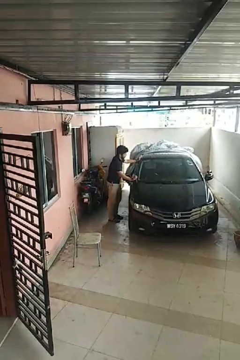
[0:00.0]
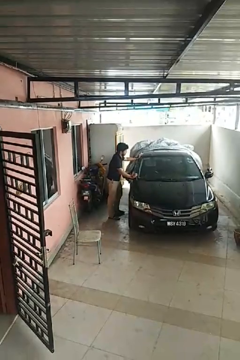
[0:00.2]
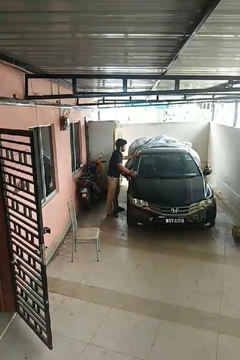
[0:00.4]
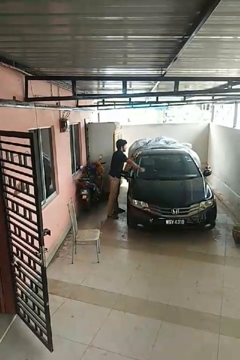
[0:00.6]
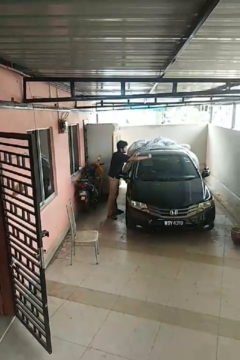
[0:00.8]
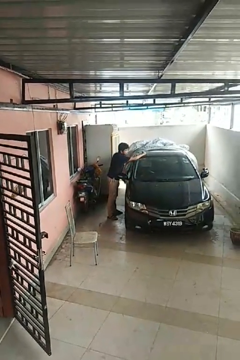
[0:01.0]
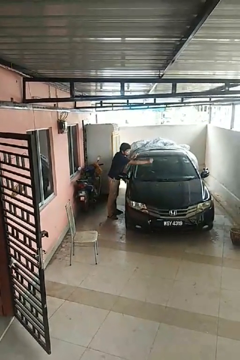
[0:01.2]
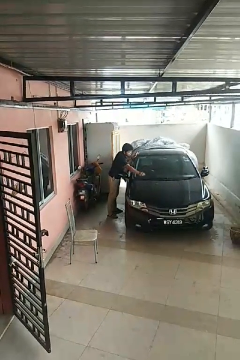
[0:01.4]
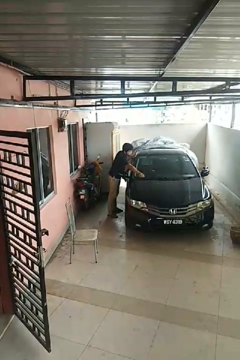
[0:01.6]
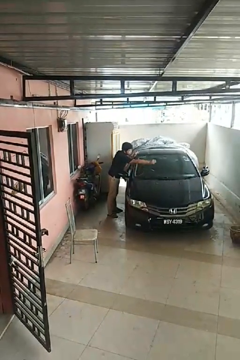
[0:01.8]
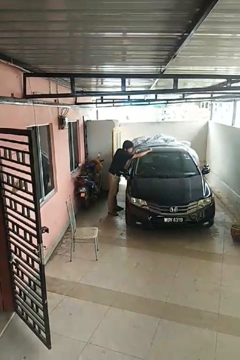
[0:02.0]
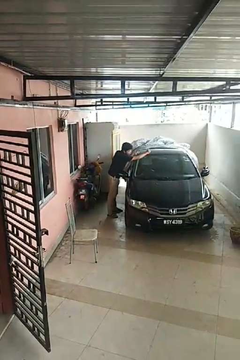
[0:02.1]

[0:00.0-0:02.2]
person polishes car with rag

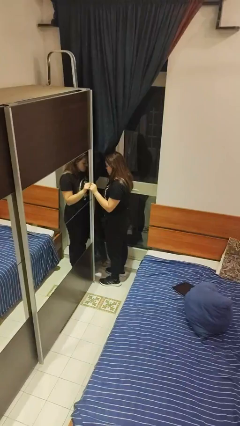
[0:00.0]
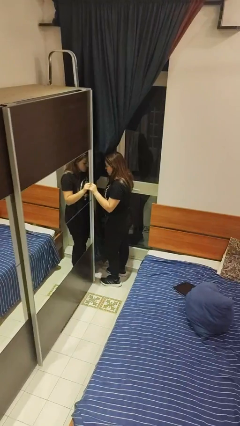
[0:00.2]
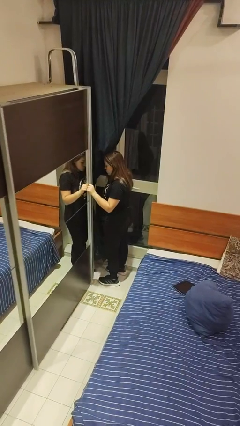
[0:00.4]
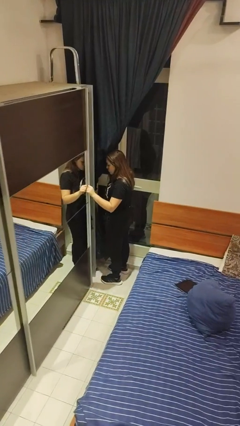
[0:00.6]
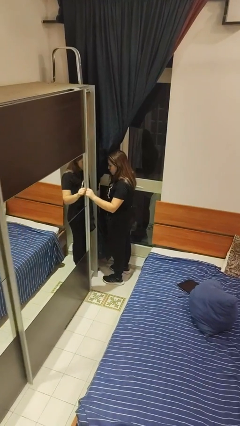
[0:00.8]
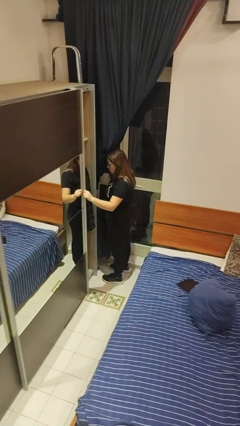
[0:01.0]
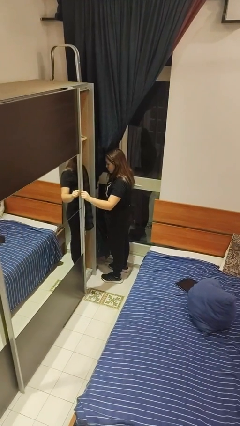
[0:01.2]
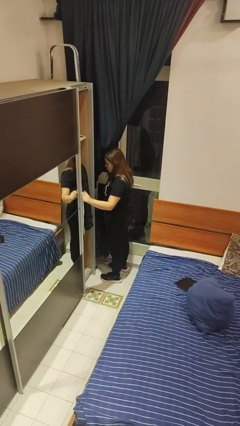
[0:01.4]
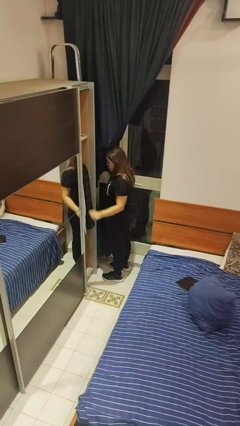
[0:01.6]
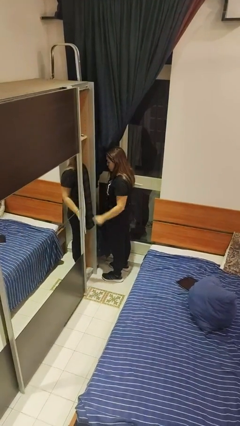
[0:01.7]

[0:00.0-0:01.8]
person opens closet door

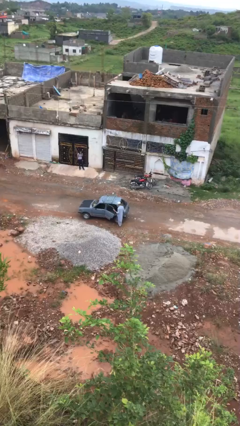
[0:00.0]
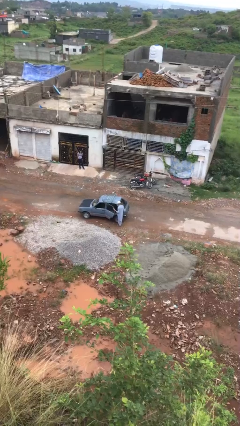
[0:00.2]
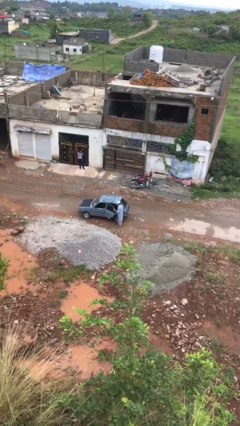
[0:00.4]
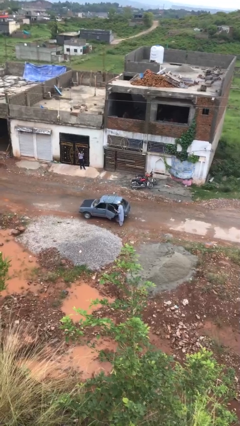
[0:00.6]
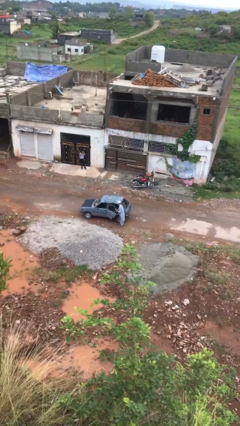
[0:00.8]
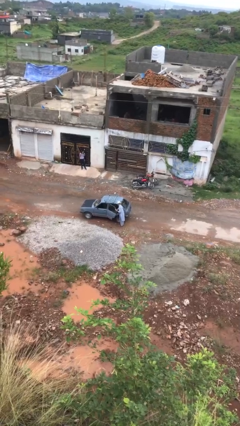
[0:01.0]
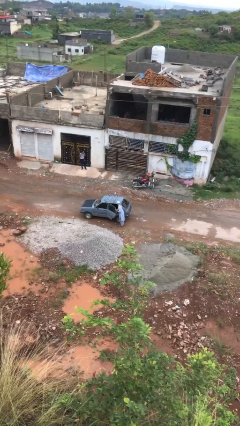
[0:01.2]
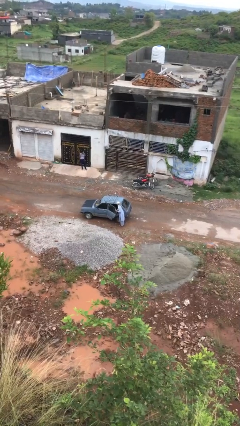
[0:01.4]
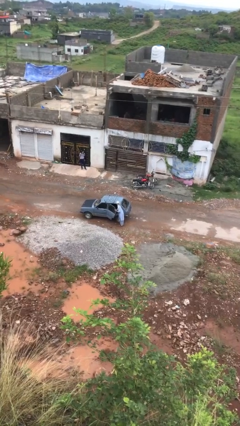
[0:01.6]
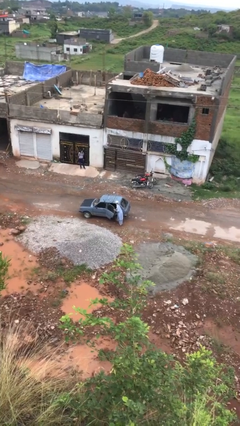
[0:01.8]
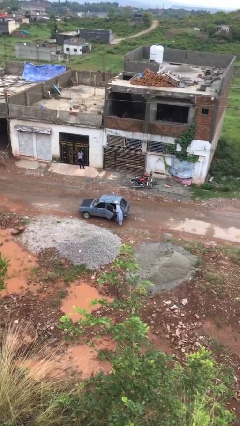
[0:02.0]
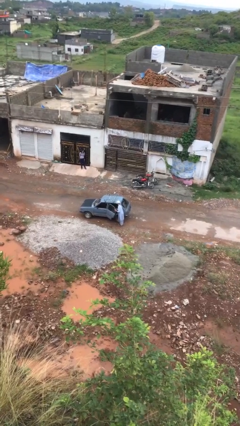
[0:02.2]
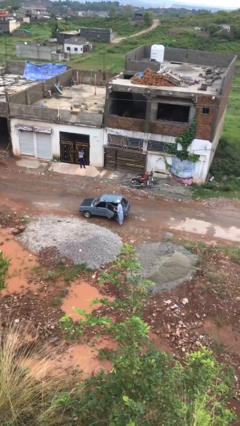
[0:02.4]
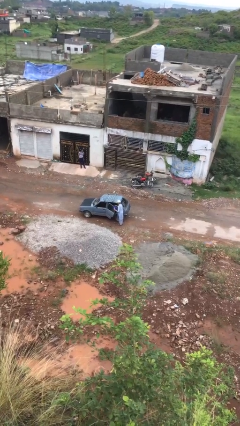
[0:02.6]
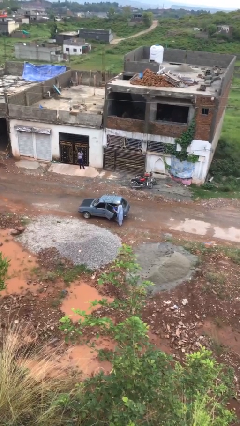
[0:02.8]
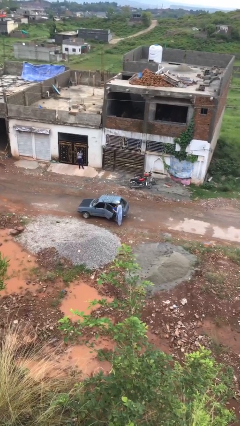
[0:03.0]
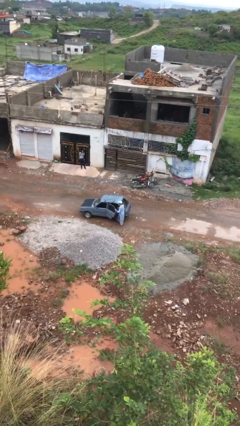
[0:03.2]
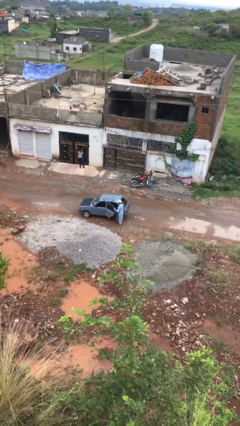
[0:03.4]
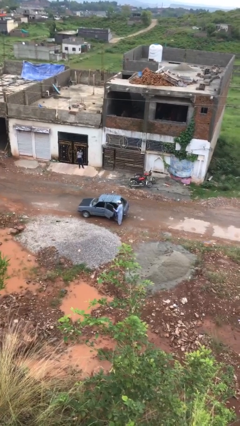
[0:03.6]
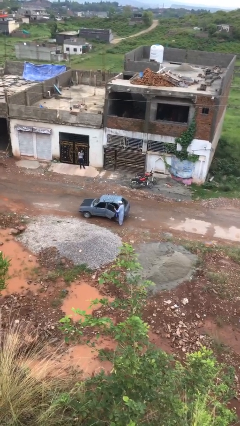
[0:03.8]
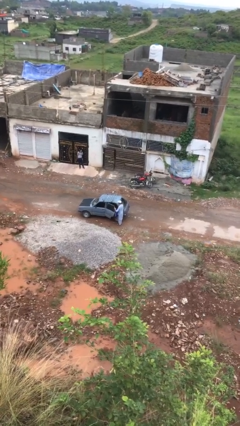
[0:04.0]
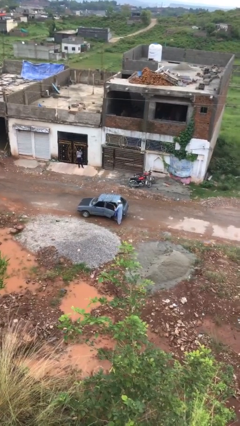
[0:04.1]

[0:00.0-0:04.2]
person unloads car

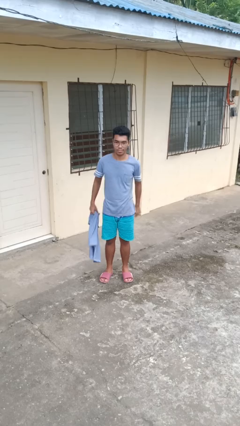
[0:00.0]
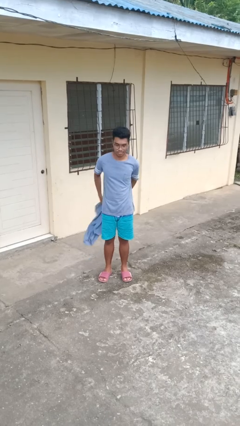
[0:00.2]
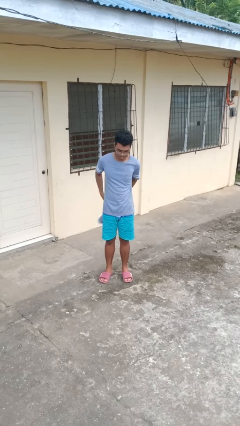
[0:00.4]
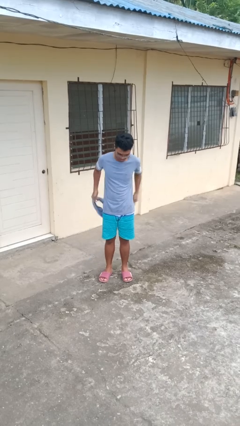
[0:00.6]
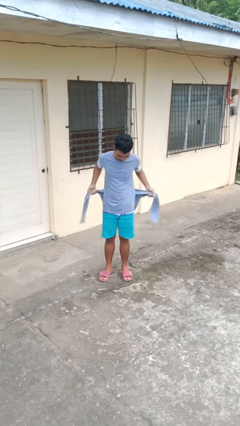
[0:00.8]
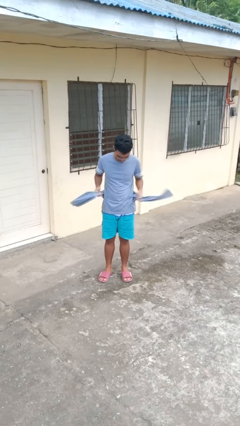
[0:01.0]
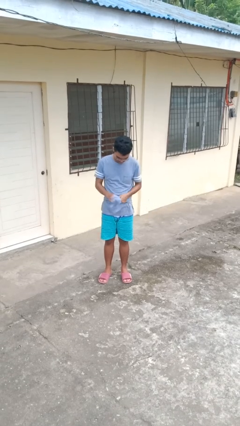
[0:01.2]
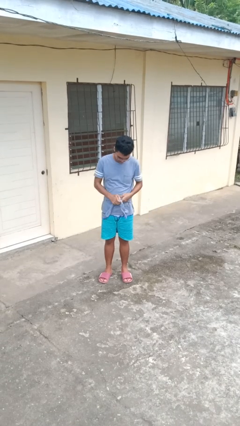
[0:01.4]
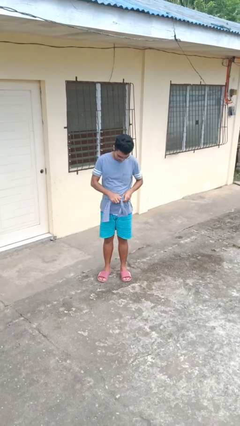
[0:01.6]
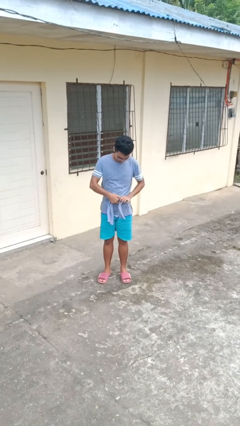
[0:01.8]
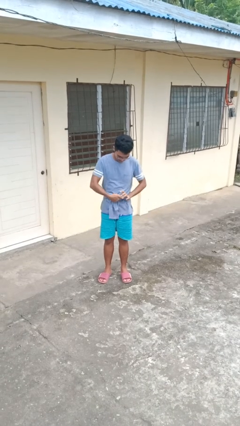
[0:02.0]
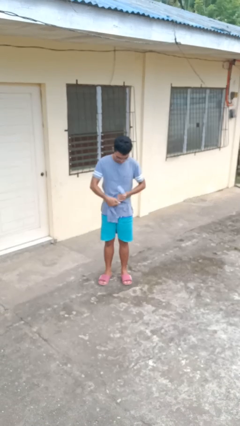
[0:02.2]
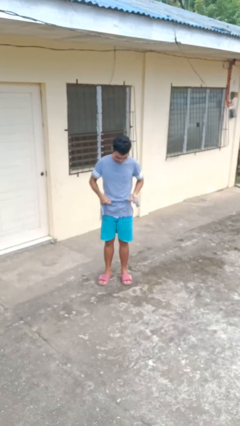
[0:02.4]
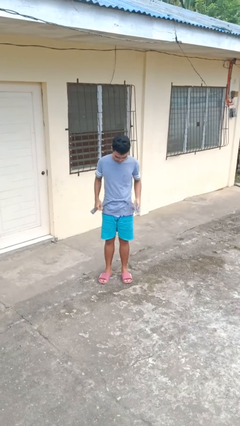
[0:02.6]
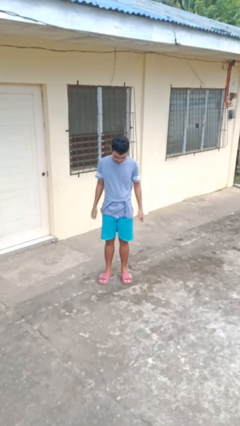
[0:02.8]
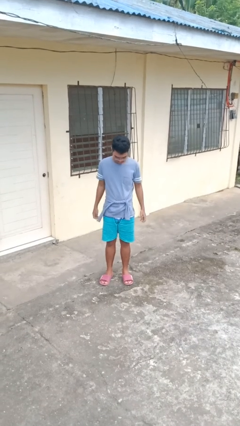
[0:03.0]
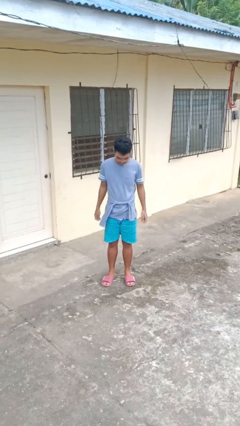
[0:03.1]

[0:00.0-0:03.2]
person ties jacket around waist

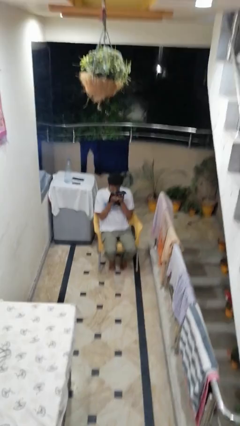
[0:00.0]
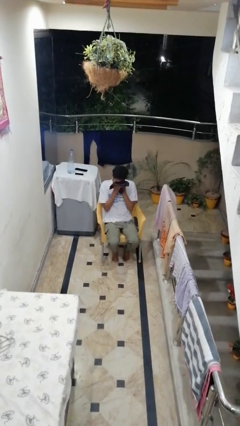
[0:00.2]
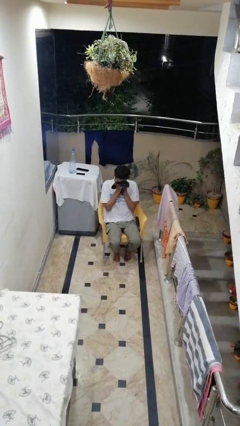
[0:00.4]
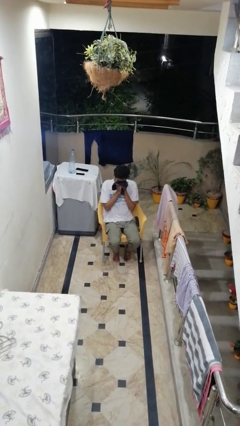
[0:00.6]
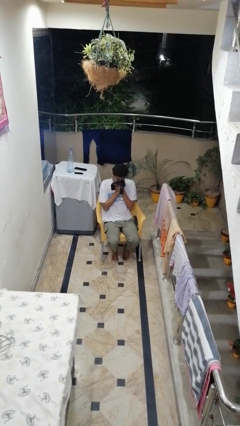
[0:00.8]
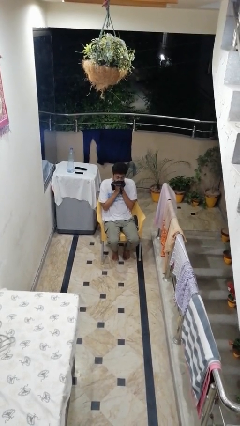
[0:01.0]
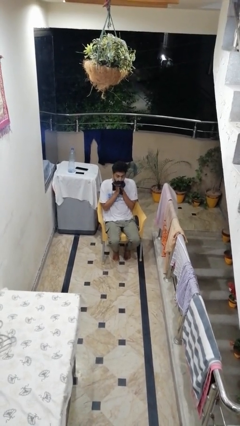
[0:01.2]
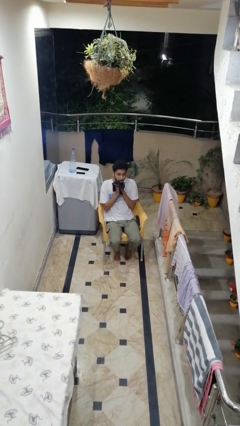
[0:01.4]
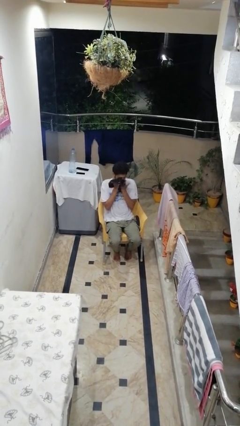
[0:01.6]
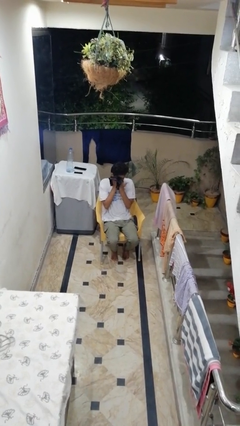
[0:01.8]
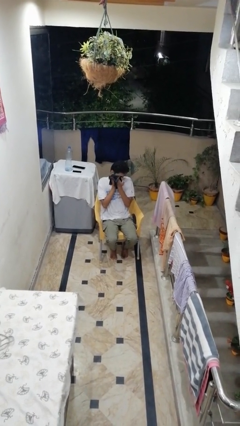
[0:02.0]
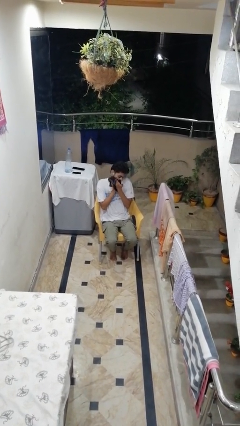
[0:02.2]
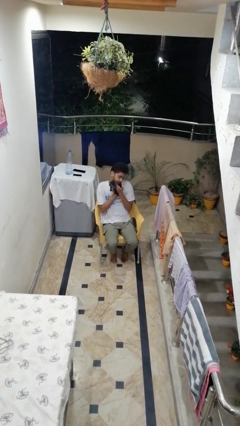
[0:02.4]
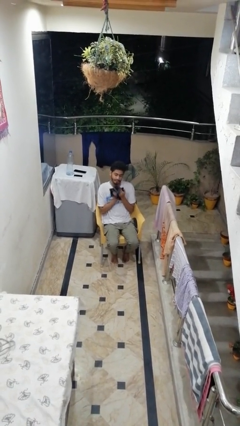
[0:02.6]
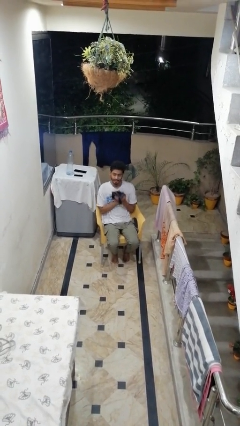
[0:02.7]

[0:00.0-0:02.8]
person wipes mouth with napkin

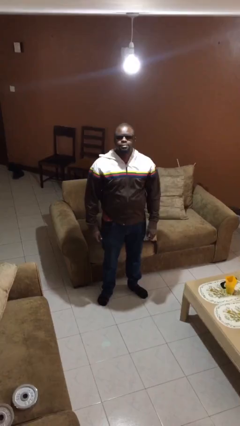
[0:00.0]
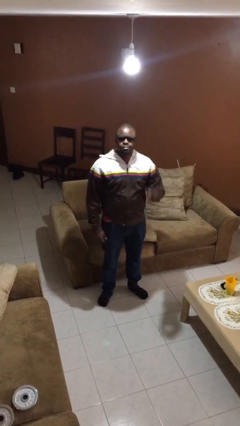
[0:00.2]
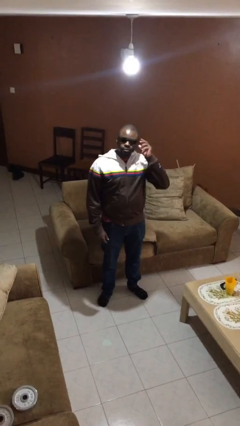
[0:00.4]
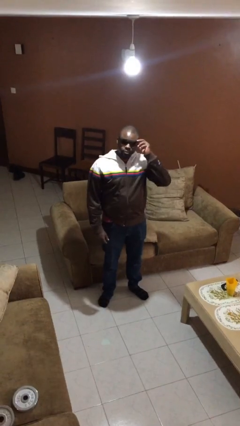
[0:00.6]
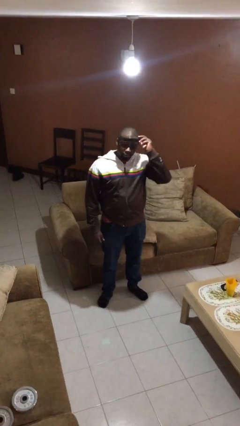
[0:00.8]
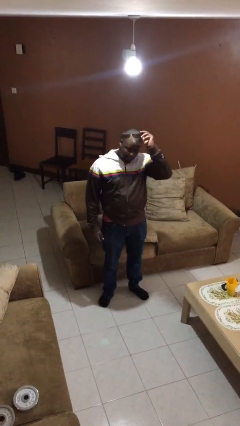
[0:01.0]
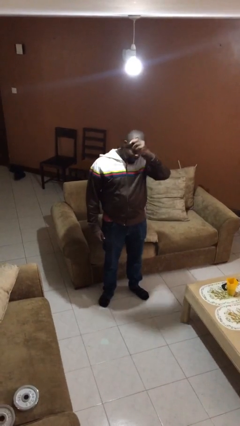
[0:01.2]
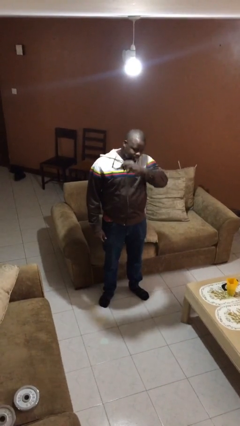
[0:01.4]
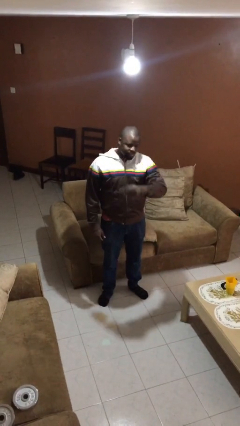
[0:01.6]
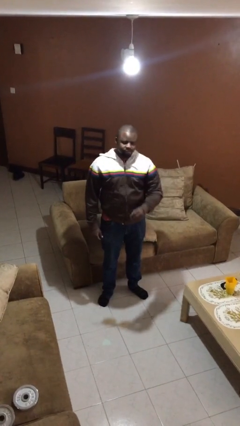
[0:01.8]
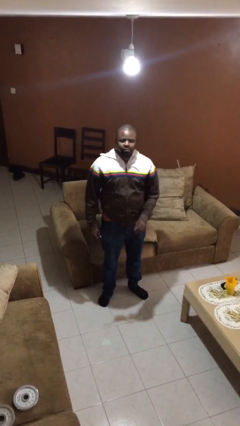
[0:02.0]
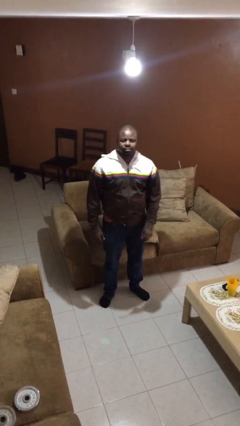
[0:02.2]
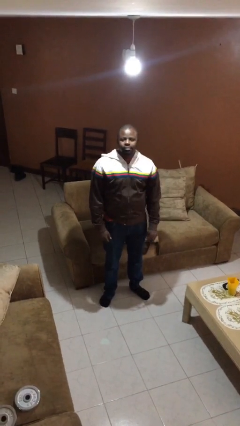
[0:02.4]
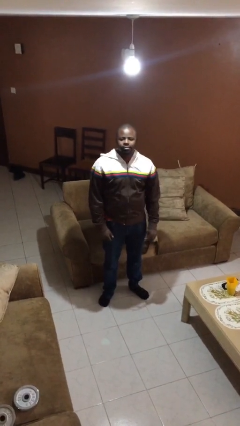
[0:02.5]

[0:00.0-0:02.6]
person takes off sunglasses

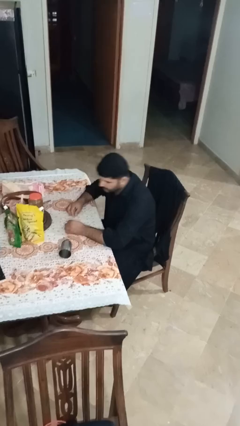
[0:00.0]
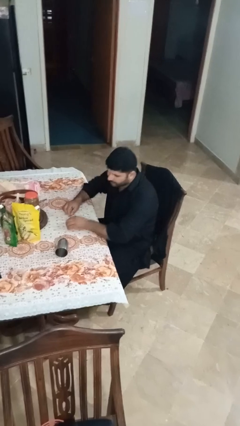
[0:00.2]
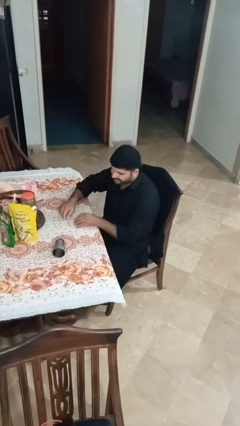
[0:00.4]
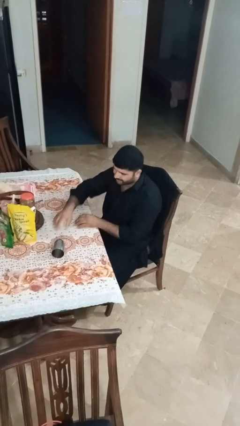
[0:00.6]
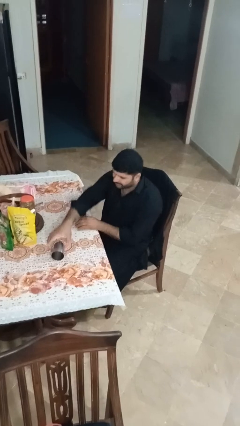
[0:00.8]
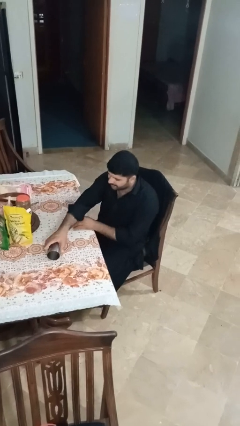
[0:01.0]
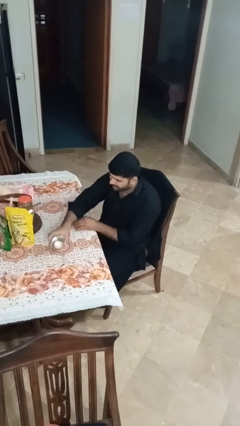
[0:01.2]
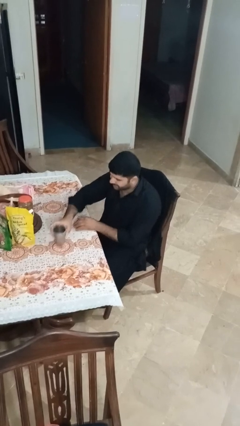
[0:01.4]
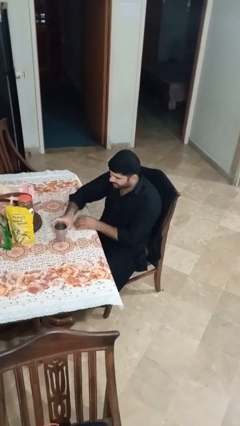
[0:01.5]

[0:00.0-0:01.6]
person sets upright glass
